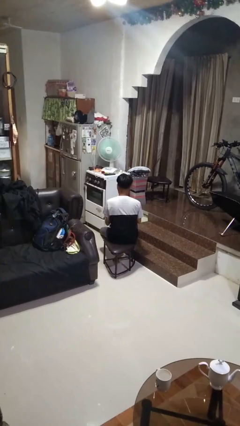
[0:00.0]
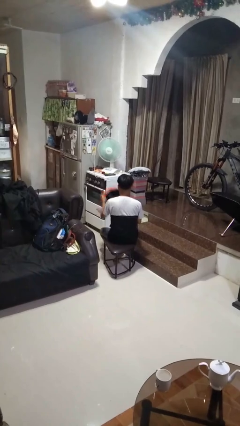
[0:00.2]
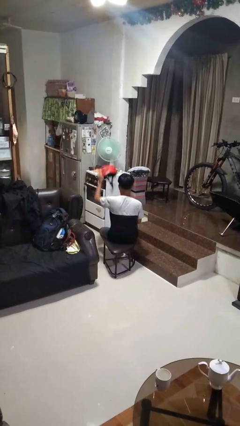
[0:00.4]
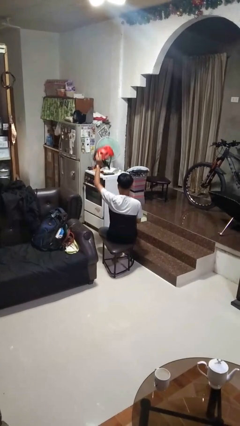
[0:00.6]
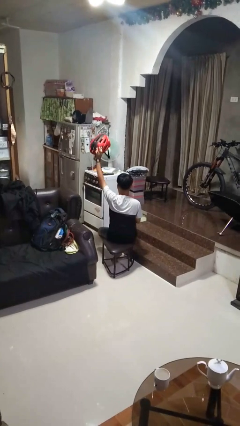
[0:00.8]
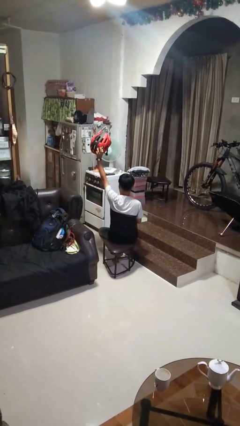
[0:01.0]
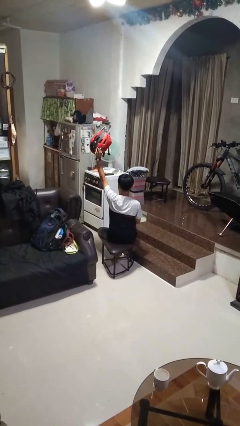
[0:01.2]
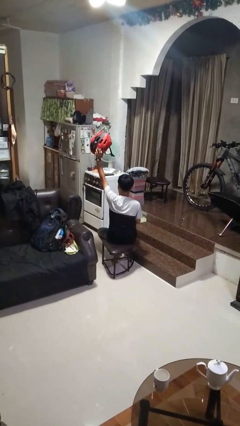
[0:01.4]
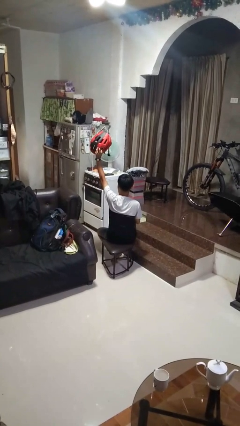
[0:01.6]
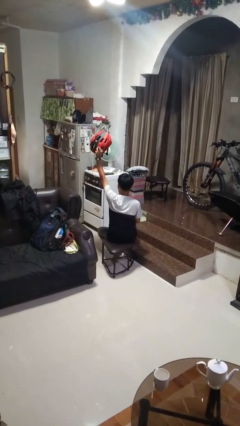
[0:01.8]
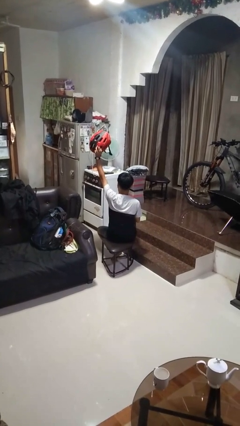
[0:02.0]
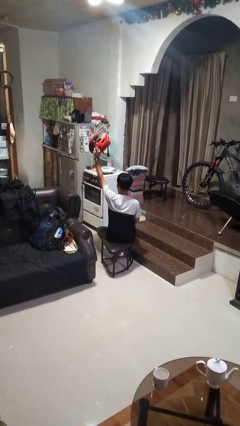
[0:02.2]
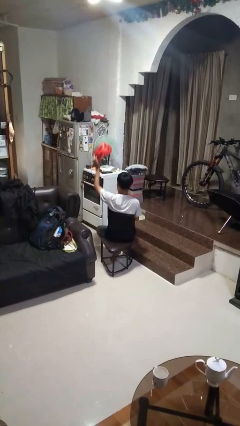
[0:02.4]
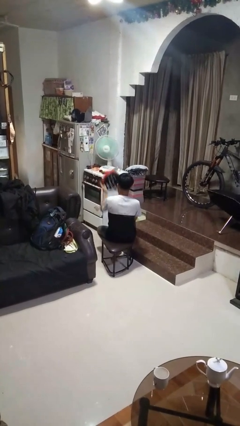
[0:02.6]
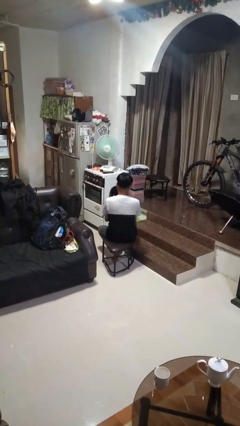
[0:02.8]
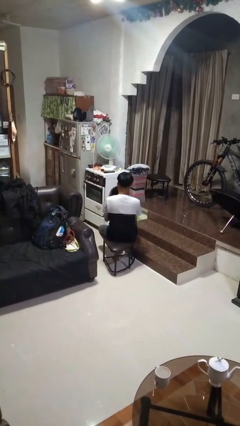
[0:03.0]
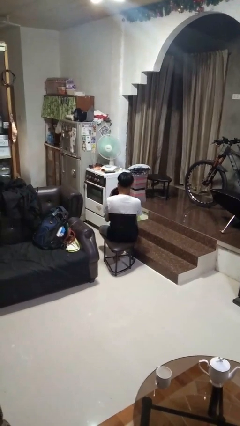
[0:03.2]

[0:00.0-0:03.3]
person holds object above head

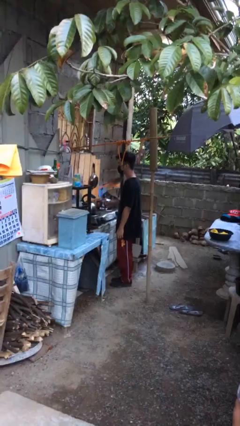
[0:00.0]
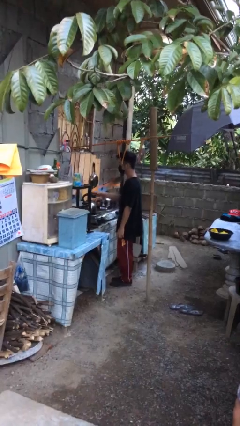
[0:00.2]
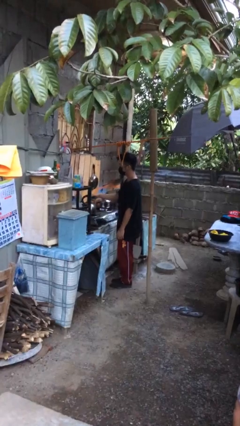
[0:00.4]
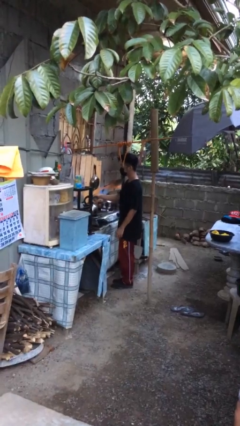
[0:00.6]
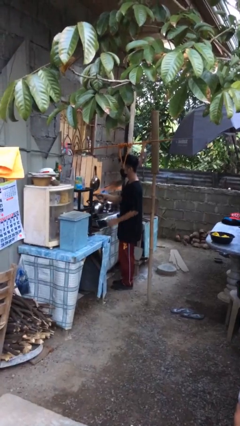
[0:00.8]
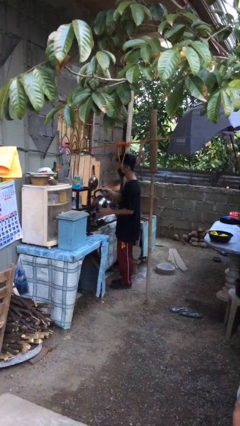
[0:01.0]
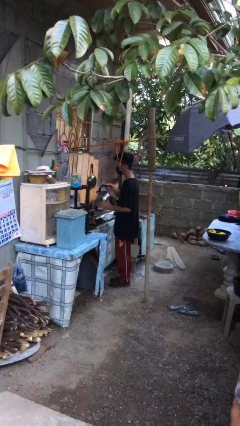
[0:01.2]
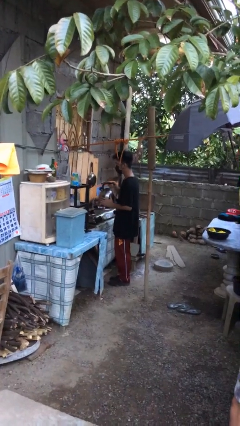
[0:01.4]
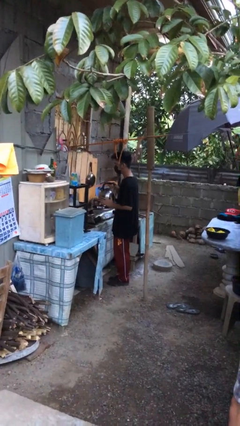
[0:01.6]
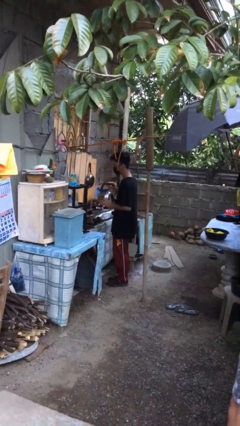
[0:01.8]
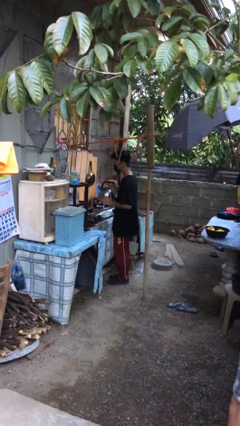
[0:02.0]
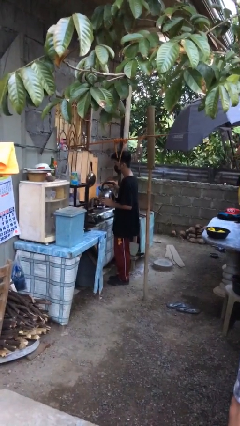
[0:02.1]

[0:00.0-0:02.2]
person picks up object from countertop

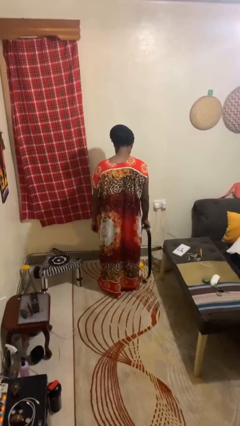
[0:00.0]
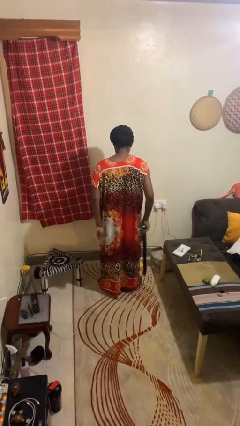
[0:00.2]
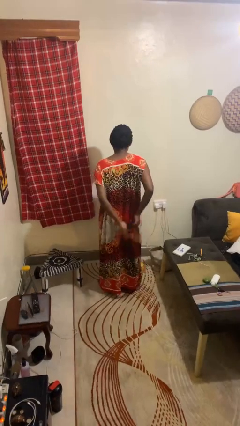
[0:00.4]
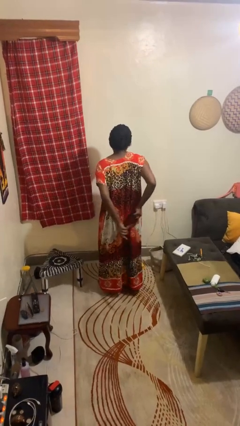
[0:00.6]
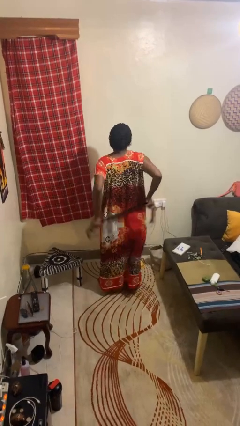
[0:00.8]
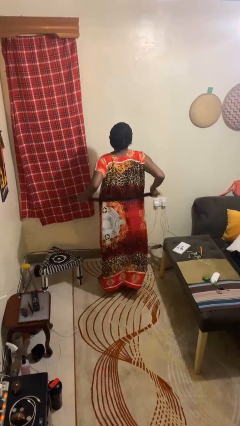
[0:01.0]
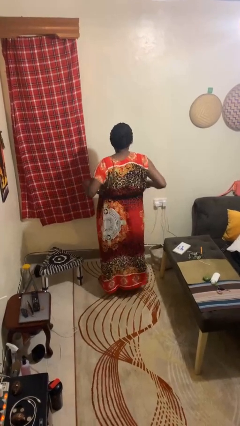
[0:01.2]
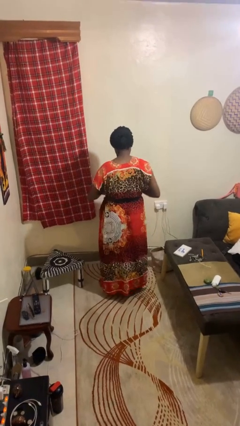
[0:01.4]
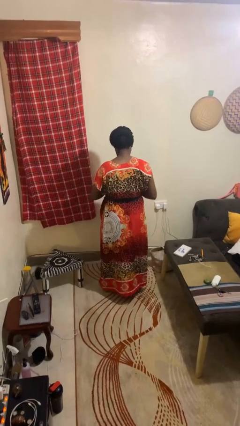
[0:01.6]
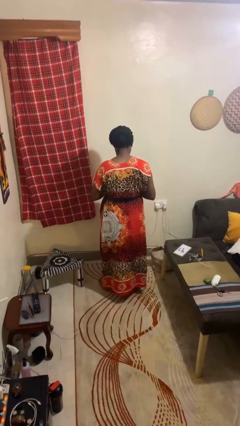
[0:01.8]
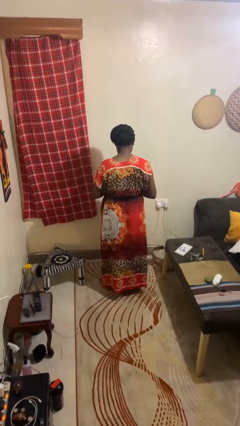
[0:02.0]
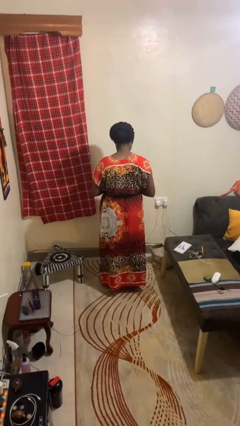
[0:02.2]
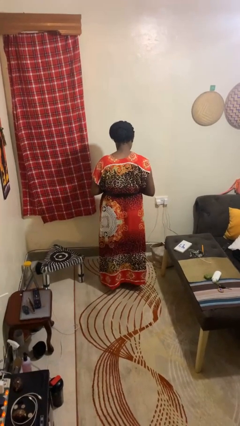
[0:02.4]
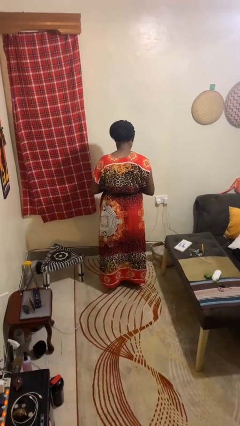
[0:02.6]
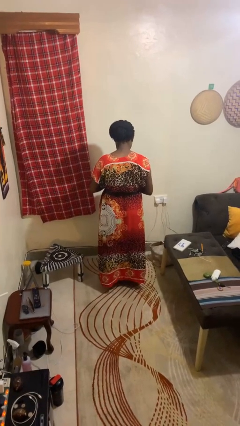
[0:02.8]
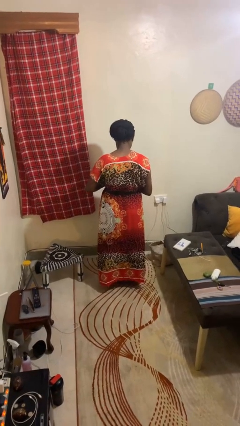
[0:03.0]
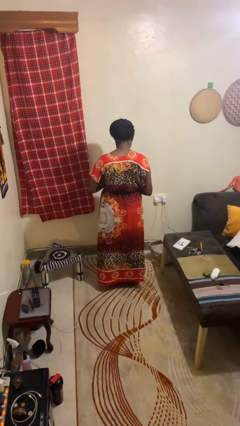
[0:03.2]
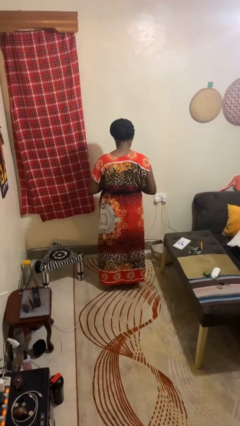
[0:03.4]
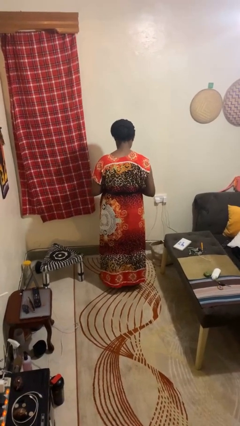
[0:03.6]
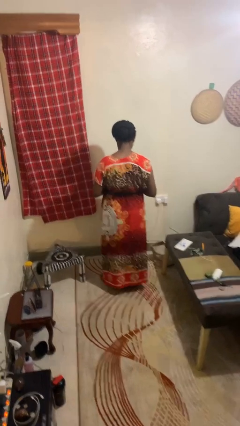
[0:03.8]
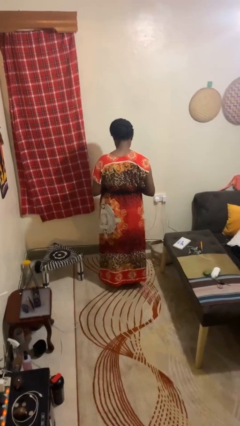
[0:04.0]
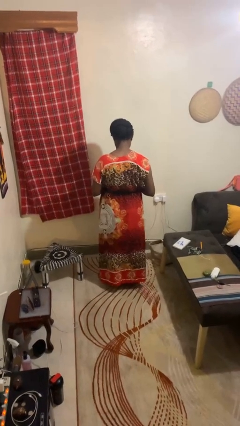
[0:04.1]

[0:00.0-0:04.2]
person puts on belt

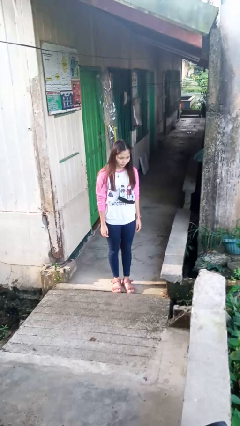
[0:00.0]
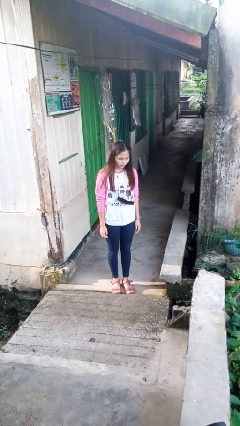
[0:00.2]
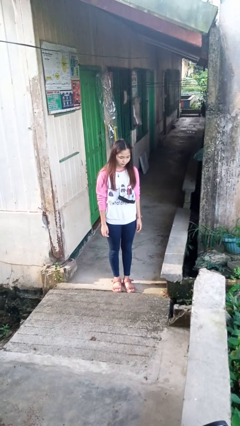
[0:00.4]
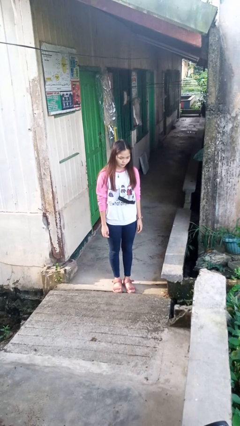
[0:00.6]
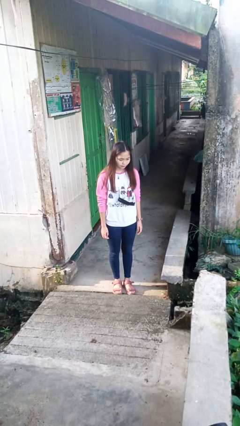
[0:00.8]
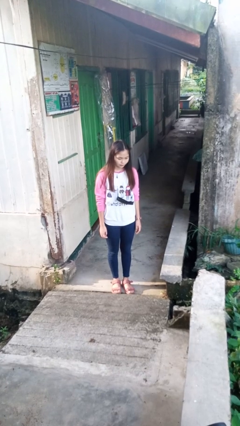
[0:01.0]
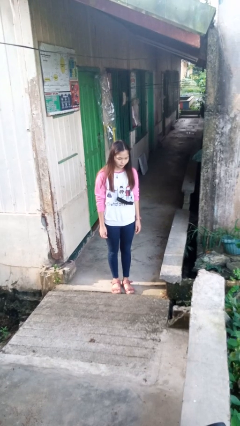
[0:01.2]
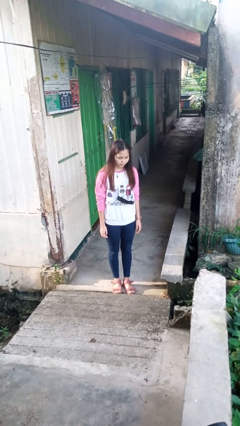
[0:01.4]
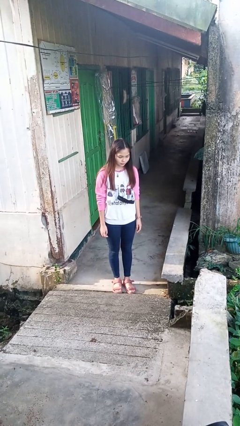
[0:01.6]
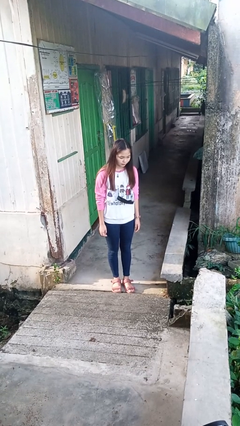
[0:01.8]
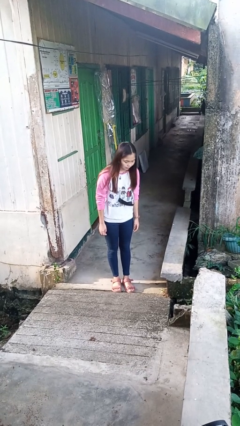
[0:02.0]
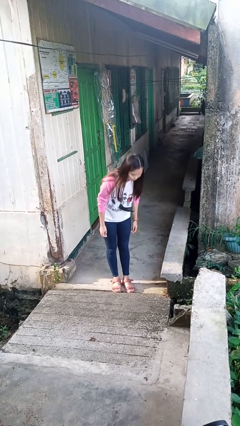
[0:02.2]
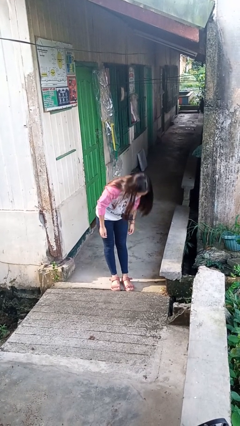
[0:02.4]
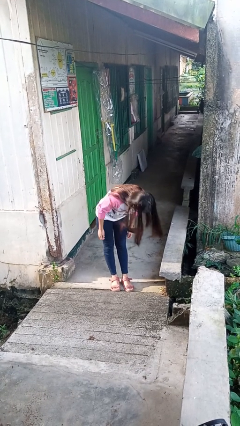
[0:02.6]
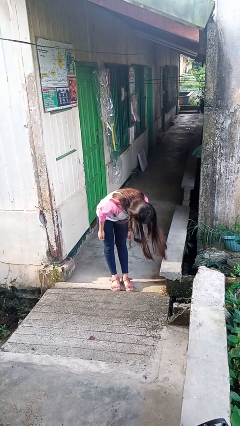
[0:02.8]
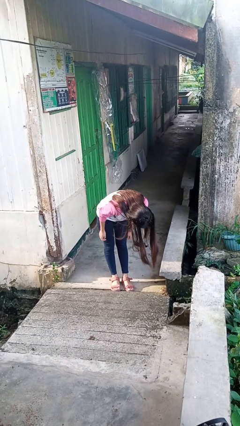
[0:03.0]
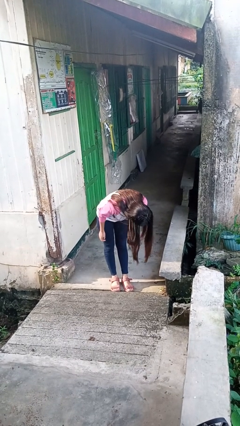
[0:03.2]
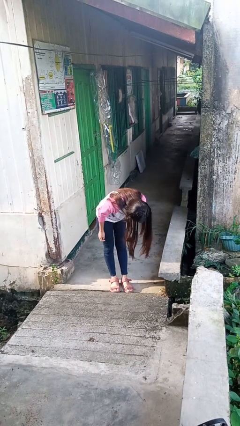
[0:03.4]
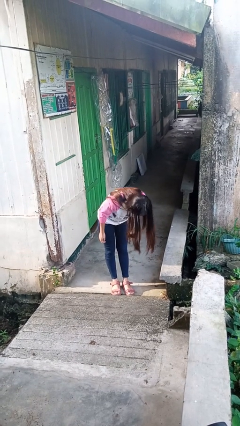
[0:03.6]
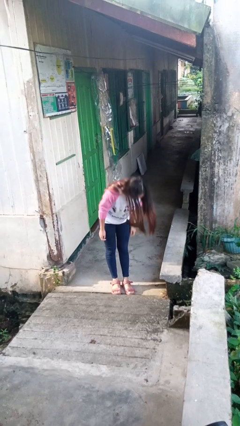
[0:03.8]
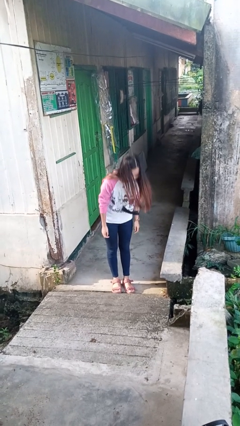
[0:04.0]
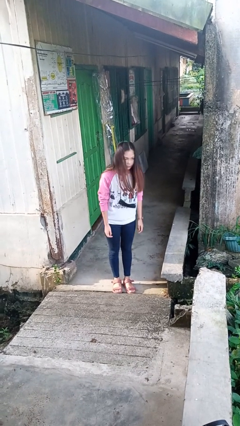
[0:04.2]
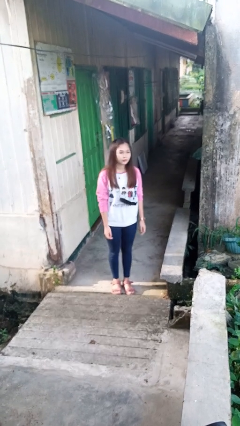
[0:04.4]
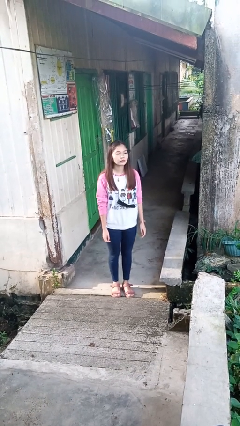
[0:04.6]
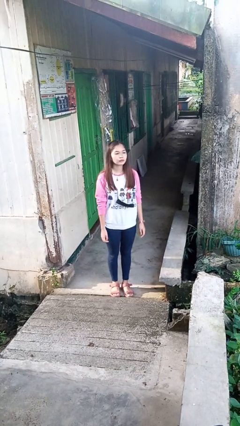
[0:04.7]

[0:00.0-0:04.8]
person bows

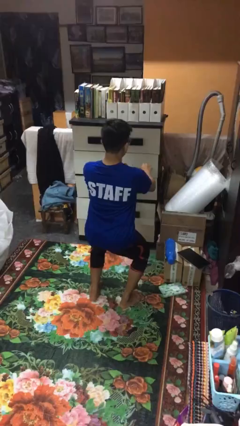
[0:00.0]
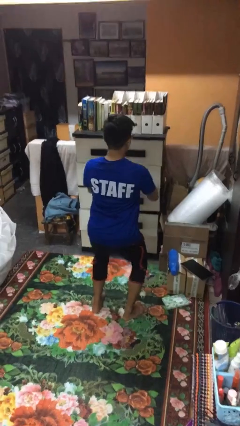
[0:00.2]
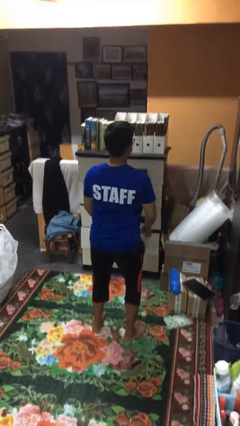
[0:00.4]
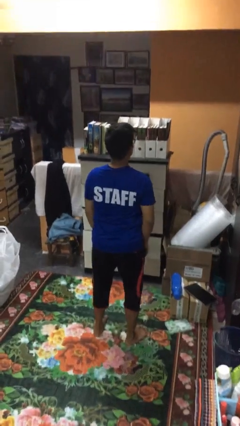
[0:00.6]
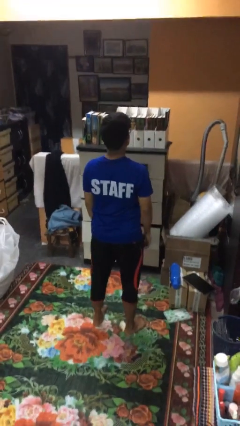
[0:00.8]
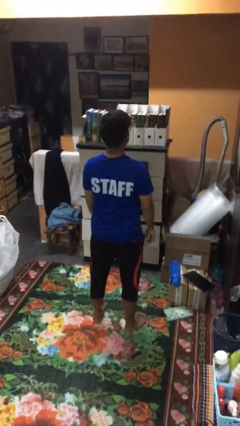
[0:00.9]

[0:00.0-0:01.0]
person stands up

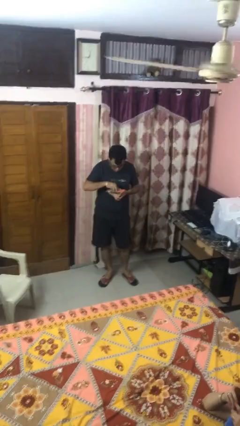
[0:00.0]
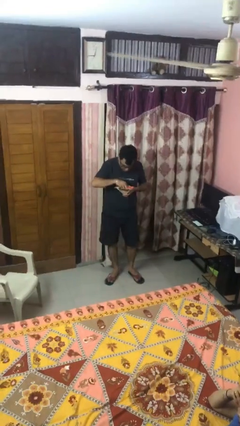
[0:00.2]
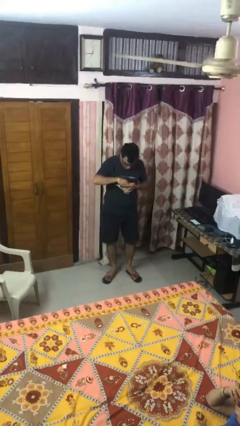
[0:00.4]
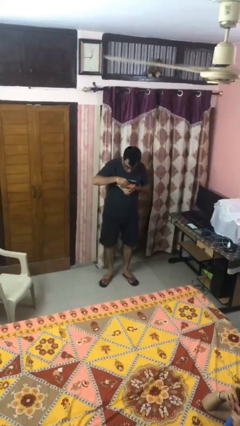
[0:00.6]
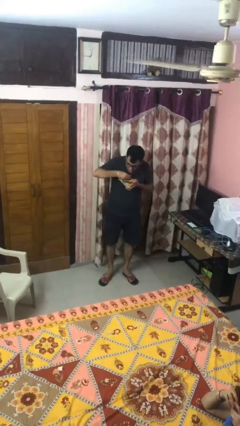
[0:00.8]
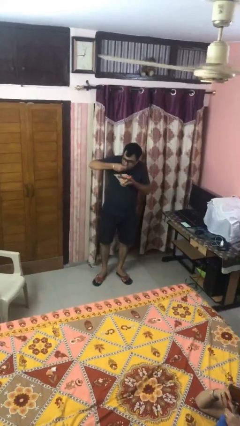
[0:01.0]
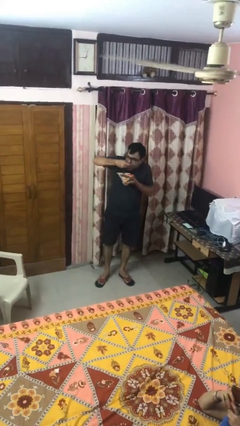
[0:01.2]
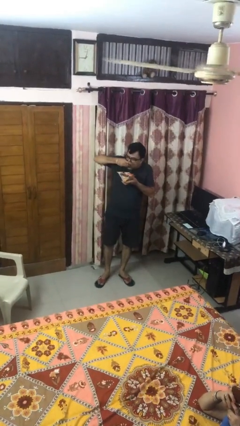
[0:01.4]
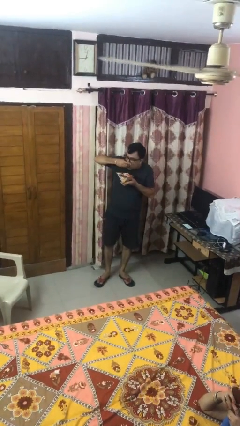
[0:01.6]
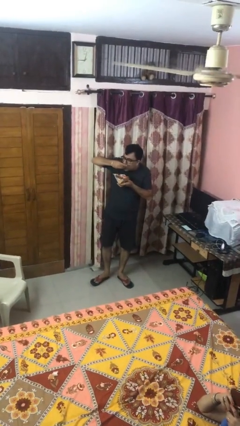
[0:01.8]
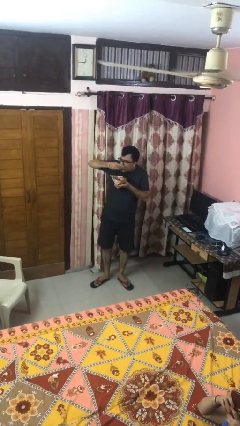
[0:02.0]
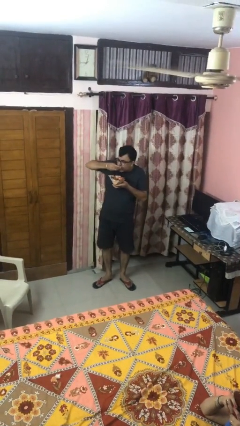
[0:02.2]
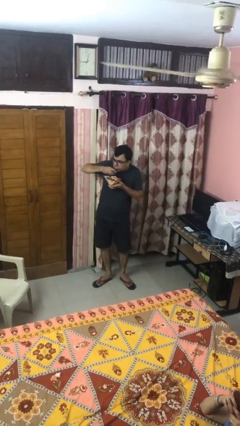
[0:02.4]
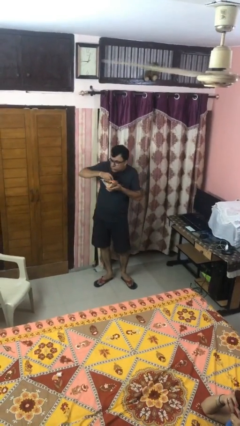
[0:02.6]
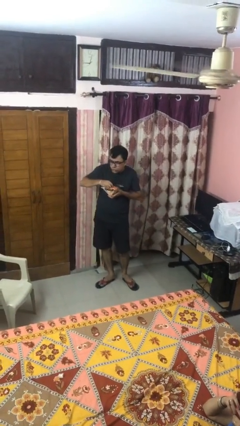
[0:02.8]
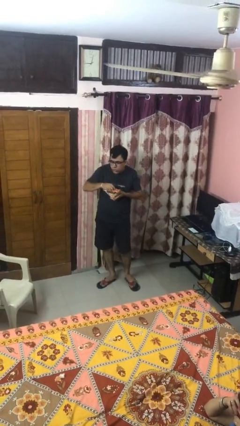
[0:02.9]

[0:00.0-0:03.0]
person eats snack from bag
